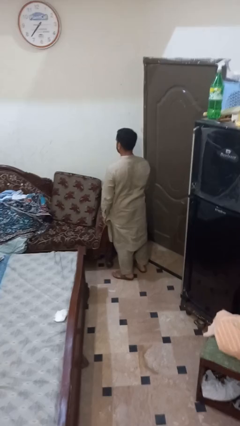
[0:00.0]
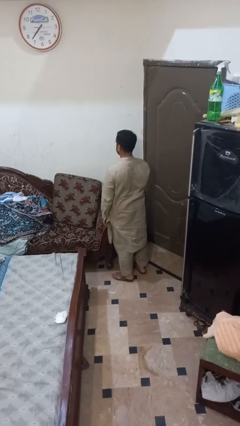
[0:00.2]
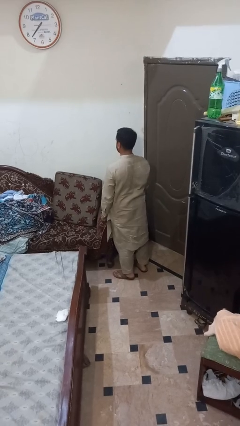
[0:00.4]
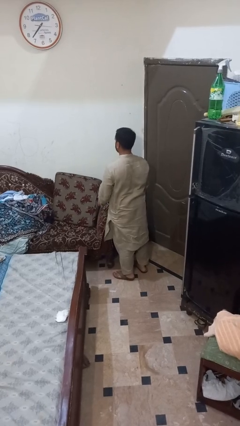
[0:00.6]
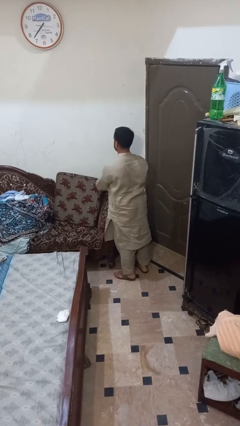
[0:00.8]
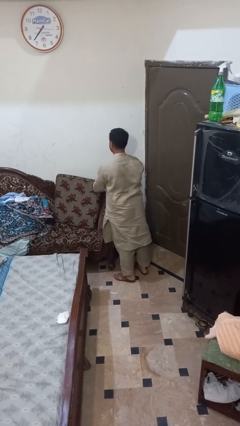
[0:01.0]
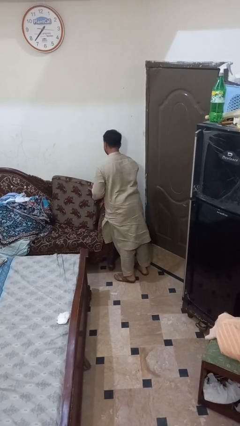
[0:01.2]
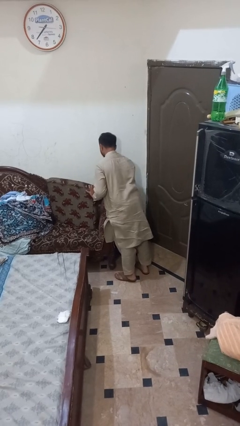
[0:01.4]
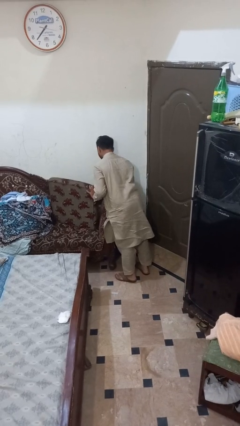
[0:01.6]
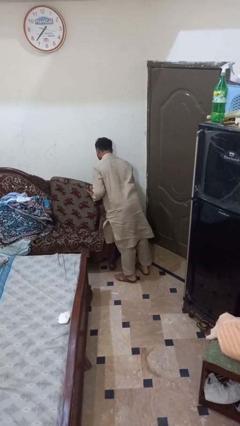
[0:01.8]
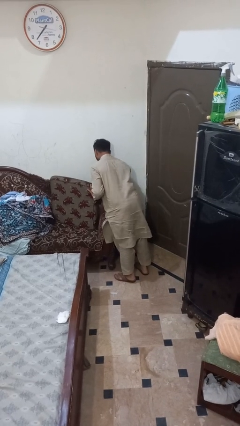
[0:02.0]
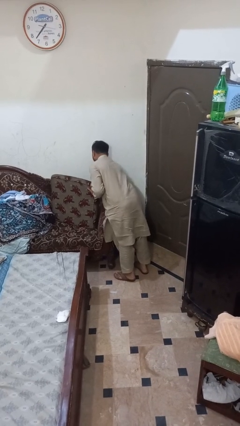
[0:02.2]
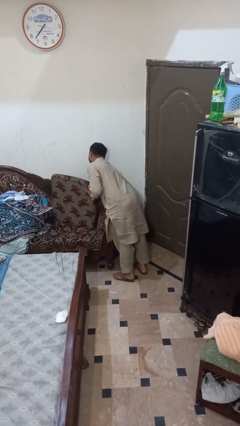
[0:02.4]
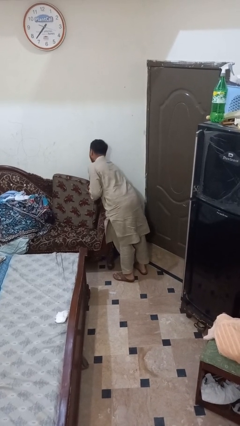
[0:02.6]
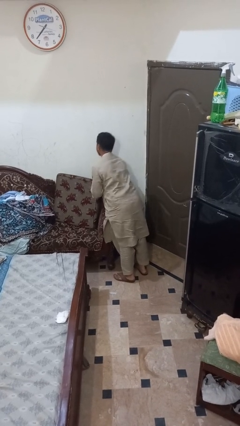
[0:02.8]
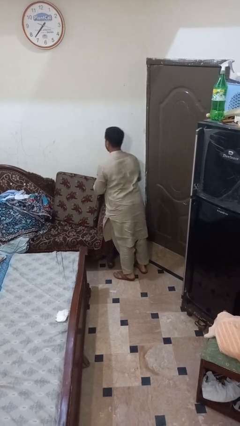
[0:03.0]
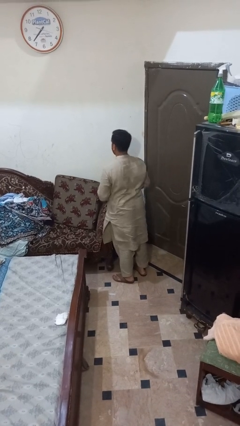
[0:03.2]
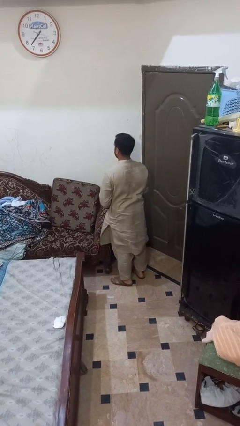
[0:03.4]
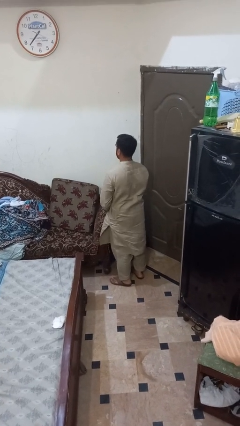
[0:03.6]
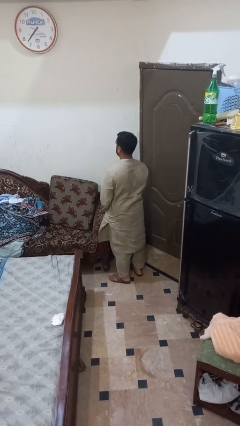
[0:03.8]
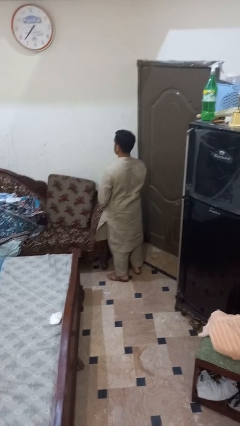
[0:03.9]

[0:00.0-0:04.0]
person searches in couch

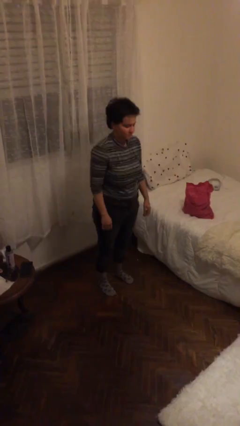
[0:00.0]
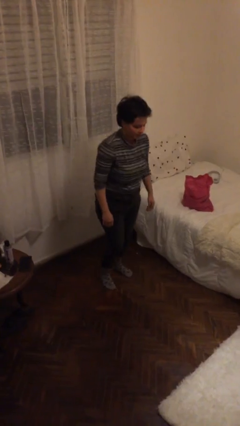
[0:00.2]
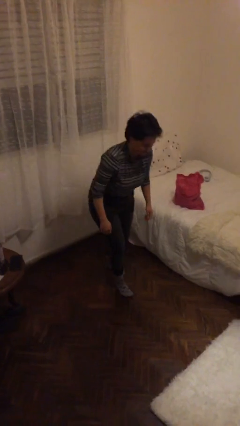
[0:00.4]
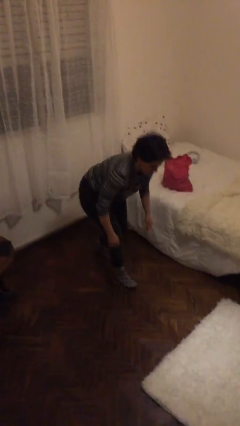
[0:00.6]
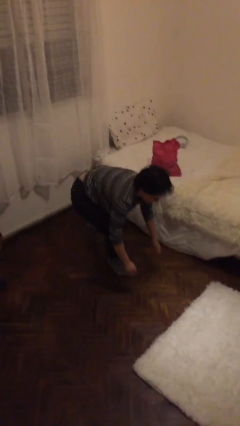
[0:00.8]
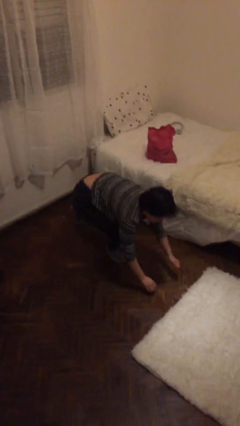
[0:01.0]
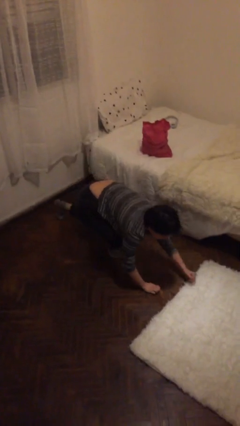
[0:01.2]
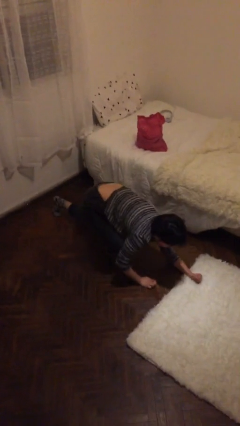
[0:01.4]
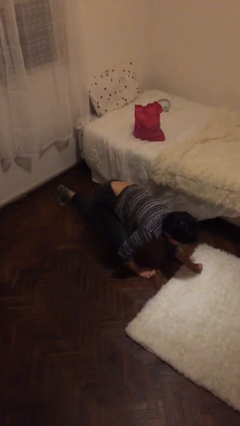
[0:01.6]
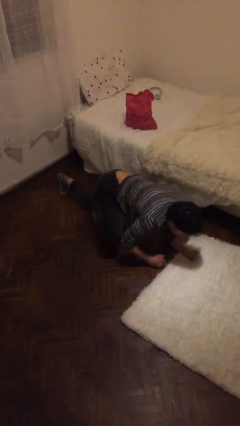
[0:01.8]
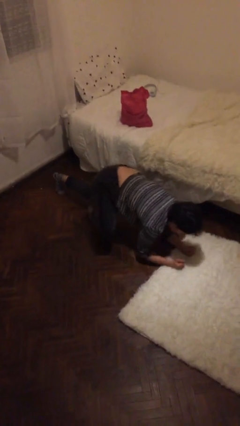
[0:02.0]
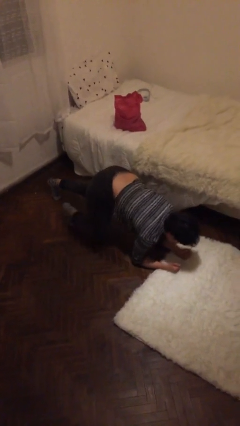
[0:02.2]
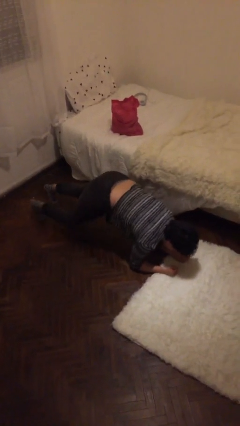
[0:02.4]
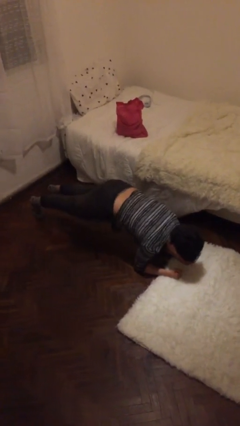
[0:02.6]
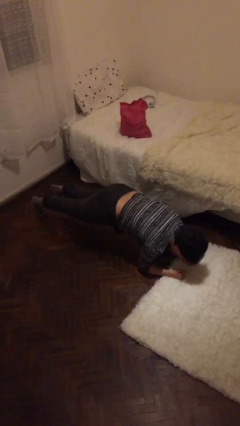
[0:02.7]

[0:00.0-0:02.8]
person exercises with plank

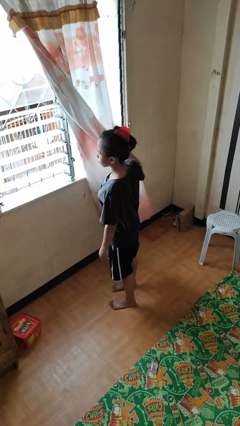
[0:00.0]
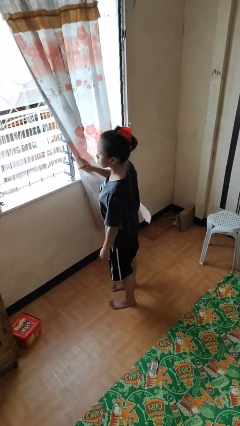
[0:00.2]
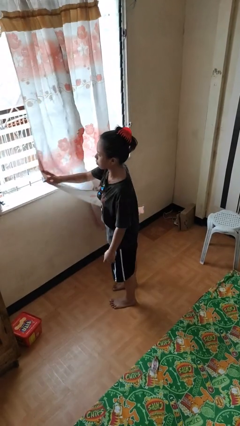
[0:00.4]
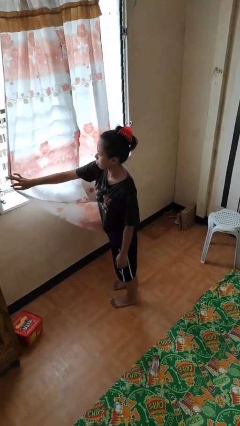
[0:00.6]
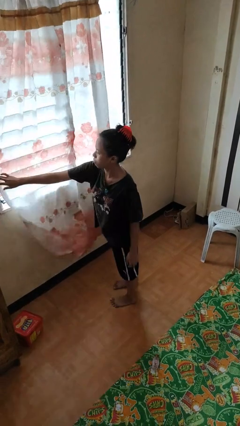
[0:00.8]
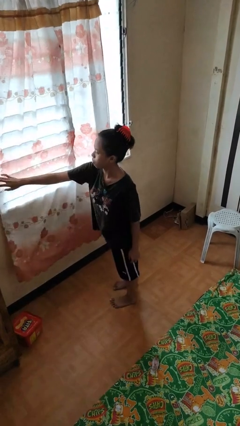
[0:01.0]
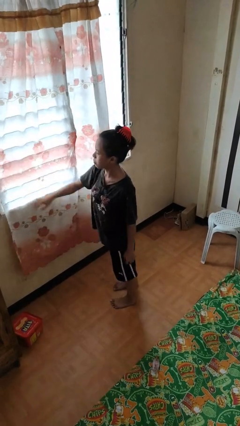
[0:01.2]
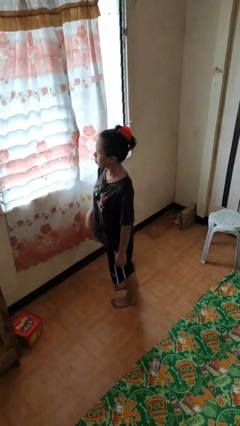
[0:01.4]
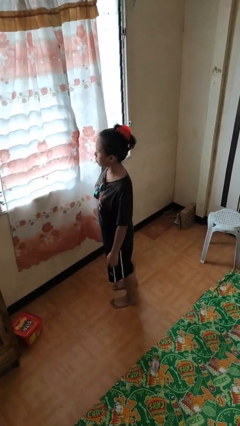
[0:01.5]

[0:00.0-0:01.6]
person closes curtains

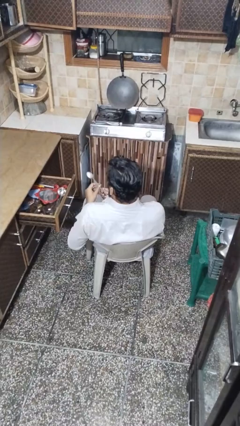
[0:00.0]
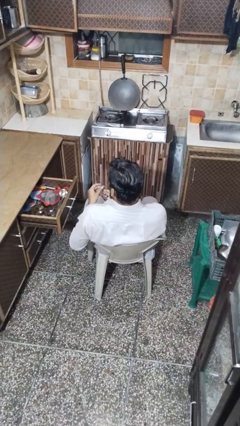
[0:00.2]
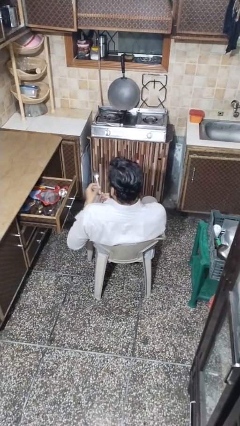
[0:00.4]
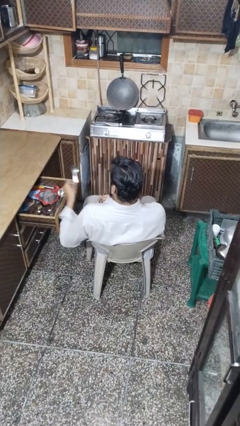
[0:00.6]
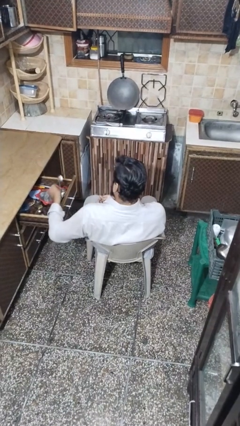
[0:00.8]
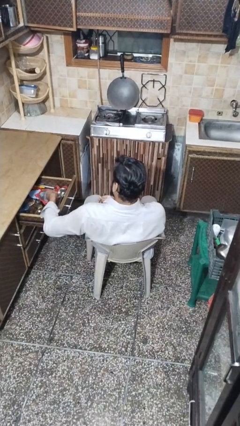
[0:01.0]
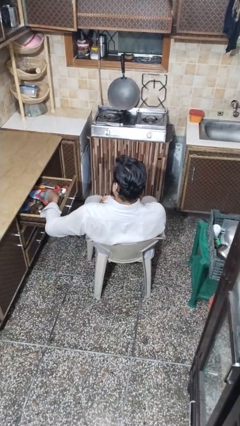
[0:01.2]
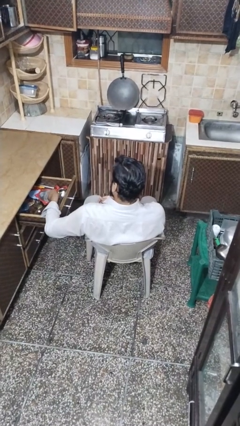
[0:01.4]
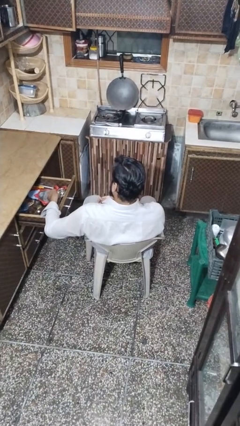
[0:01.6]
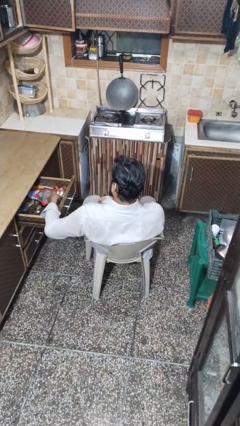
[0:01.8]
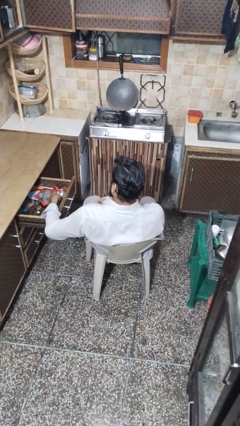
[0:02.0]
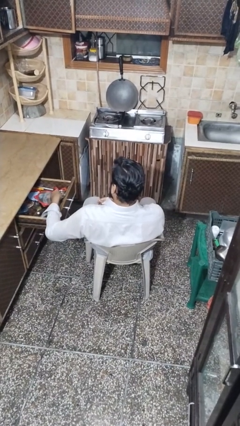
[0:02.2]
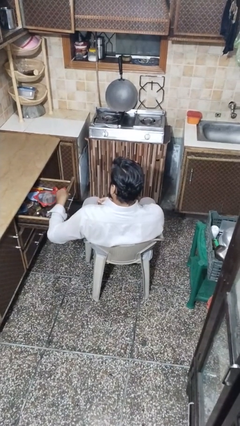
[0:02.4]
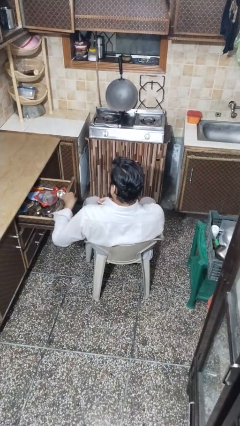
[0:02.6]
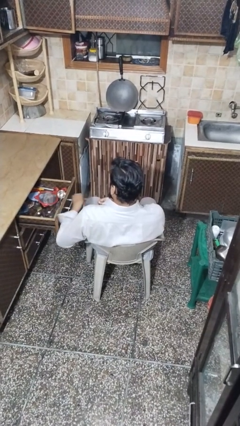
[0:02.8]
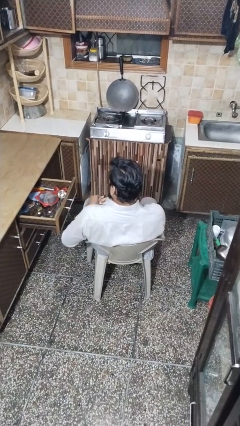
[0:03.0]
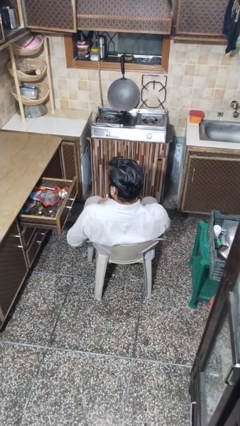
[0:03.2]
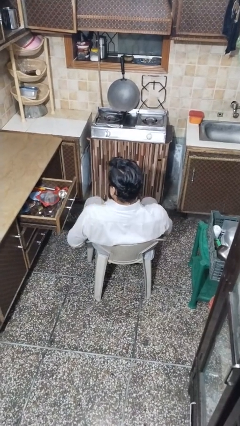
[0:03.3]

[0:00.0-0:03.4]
person puts object into kitchen drawer

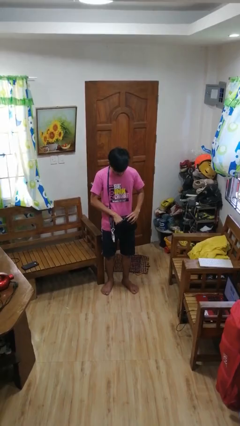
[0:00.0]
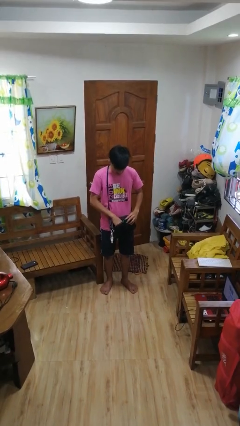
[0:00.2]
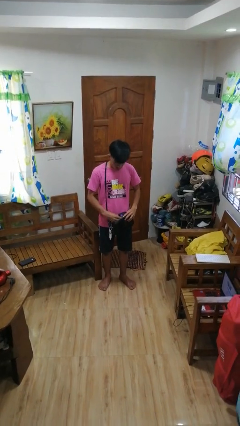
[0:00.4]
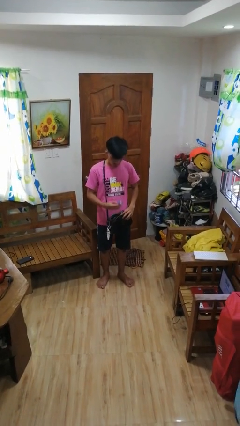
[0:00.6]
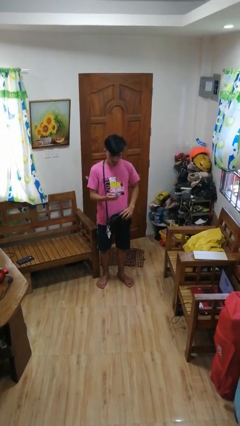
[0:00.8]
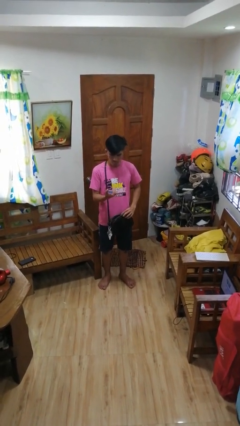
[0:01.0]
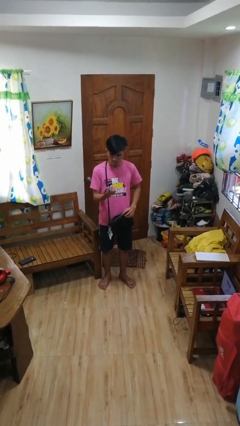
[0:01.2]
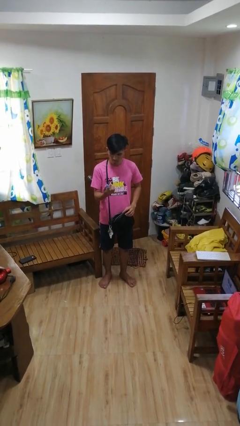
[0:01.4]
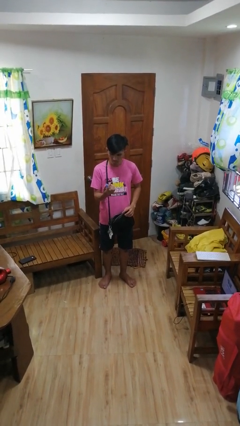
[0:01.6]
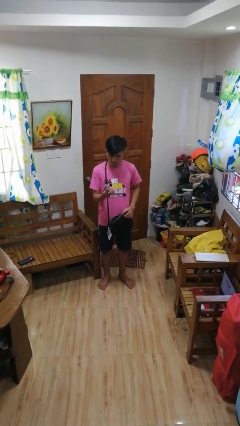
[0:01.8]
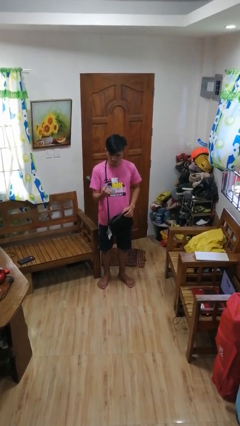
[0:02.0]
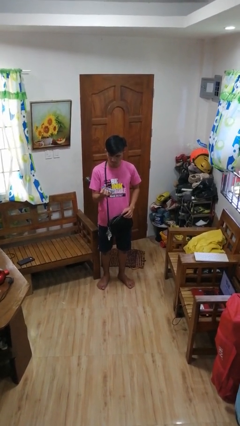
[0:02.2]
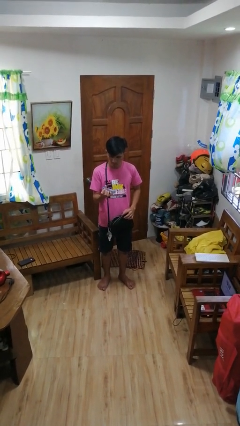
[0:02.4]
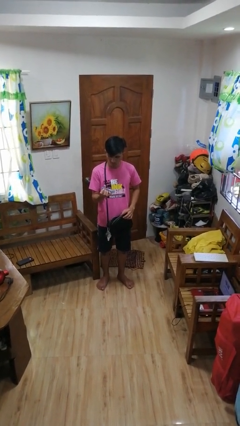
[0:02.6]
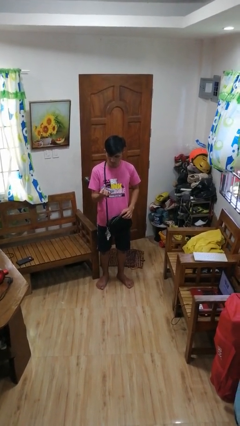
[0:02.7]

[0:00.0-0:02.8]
person takes object from purse

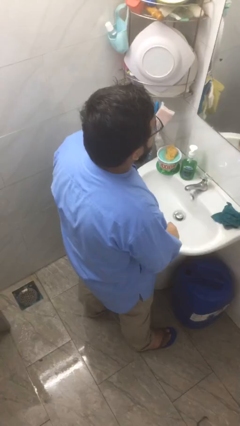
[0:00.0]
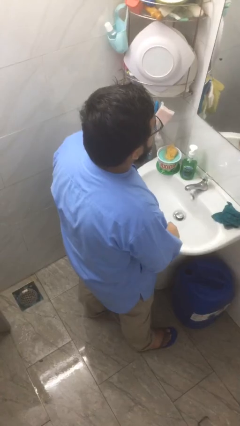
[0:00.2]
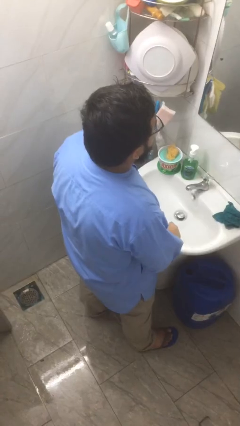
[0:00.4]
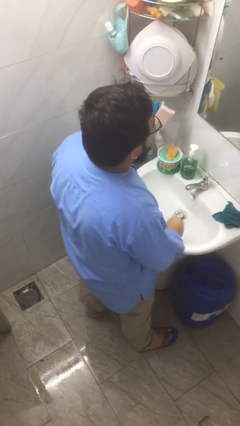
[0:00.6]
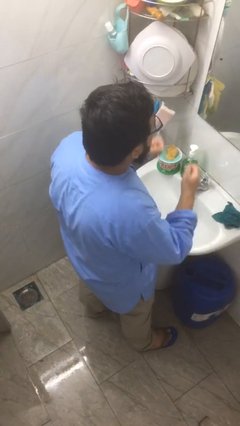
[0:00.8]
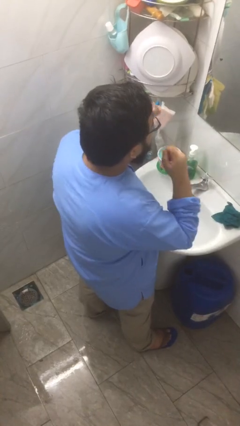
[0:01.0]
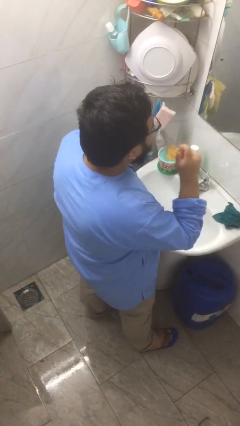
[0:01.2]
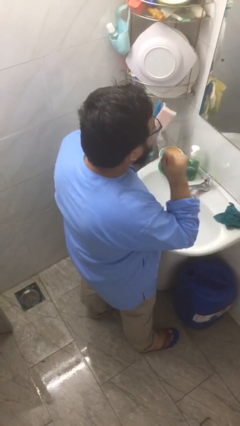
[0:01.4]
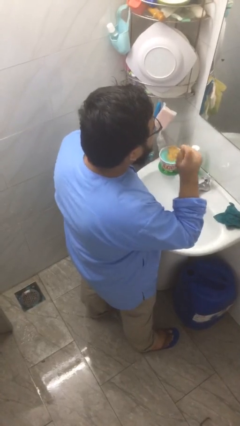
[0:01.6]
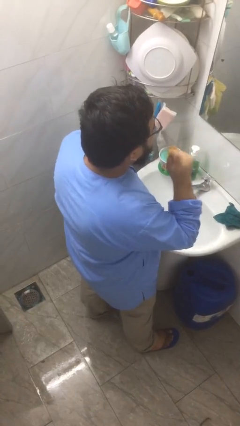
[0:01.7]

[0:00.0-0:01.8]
person flosses

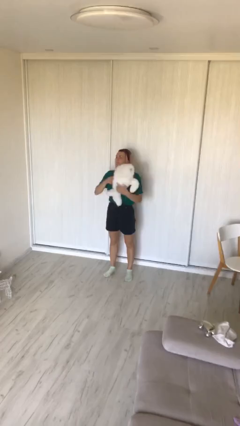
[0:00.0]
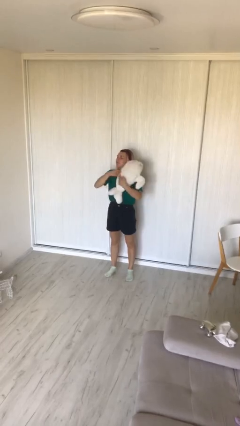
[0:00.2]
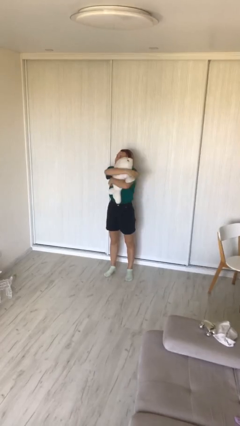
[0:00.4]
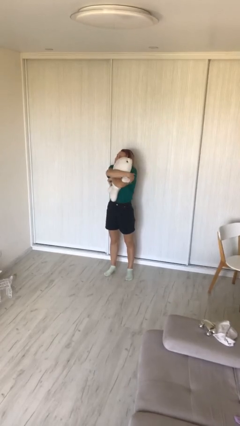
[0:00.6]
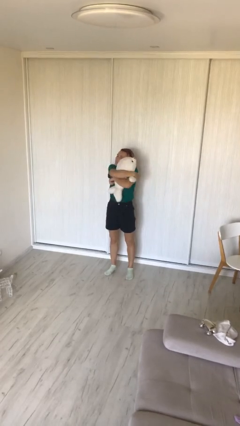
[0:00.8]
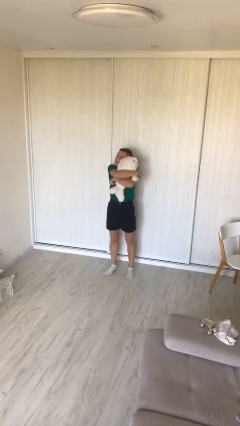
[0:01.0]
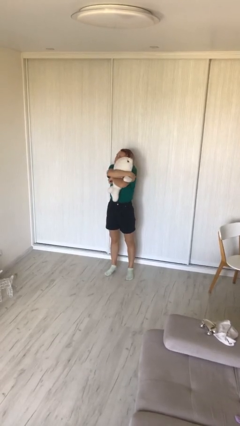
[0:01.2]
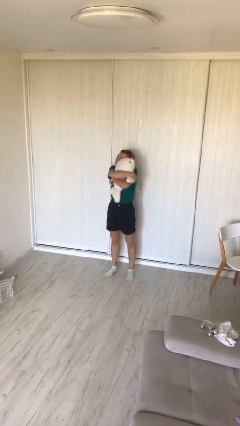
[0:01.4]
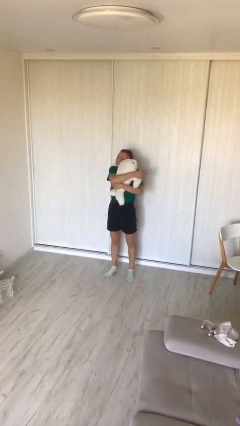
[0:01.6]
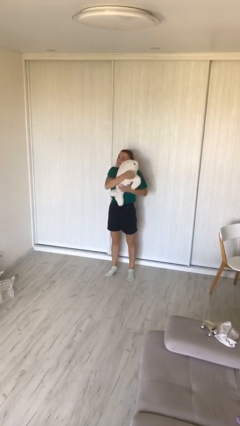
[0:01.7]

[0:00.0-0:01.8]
person hugs stuffed animal
